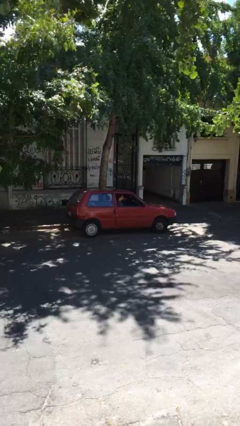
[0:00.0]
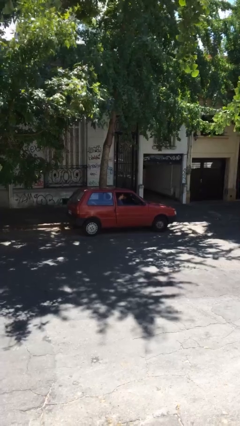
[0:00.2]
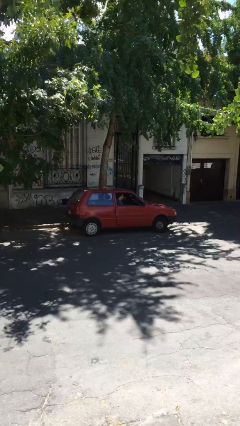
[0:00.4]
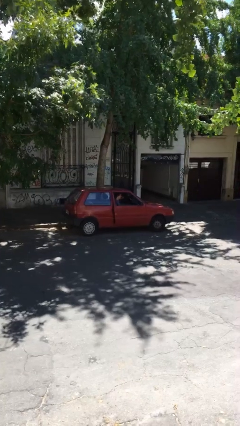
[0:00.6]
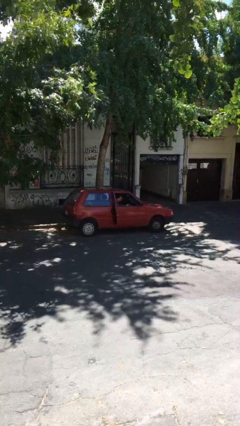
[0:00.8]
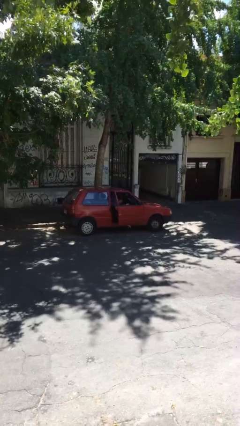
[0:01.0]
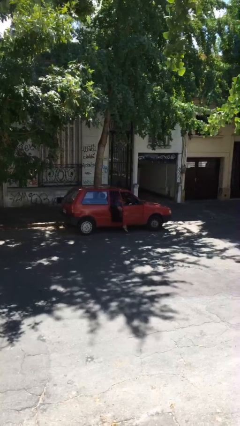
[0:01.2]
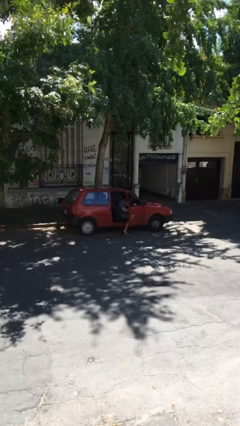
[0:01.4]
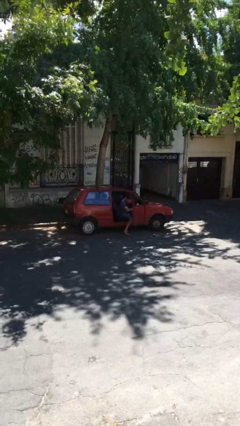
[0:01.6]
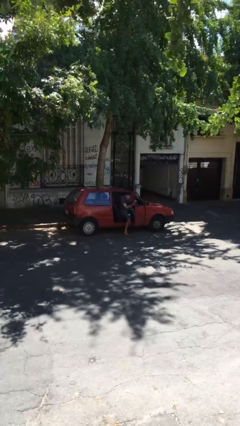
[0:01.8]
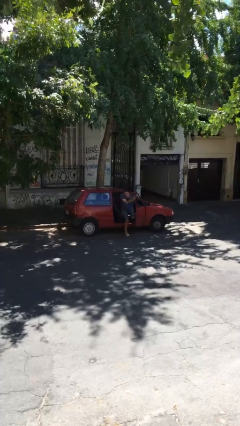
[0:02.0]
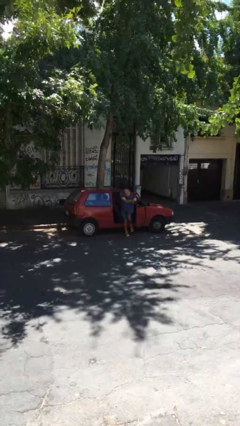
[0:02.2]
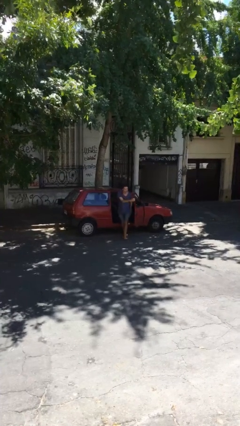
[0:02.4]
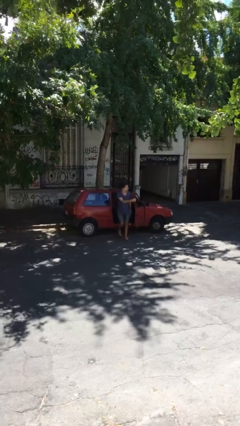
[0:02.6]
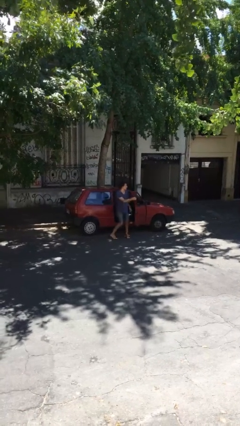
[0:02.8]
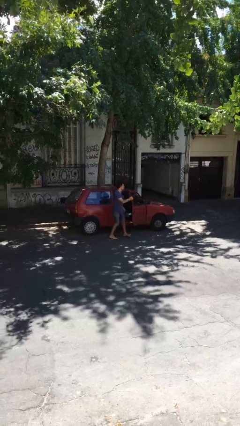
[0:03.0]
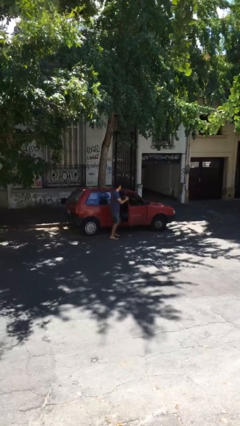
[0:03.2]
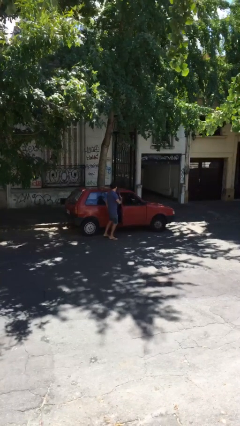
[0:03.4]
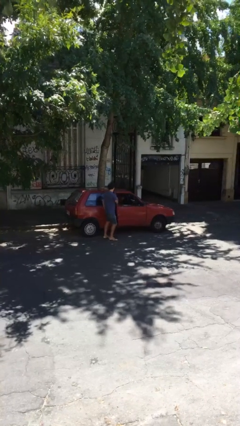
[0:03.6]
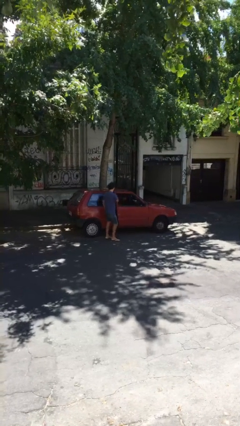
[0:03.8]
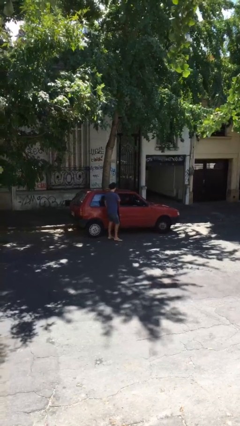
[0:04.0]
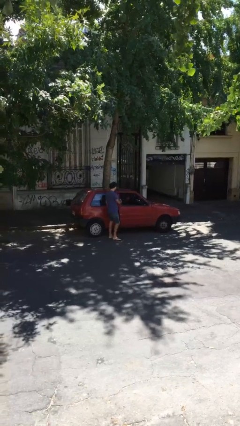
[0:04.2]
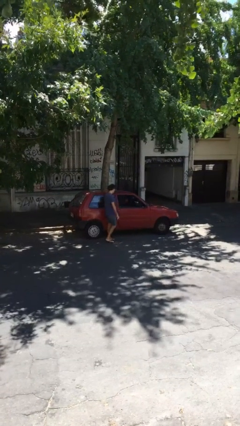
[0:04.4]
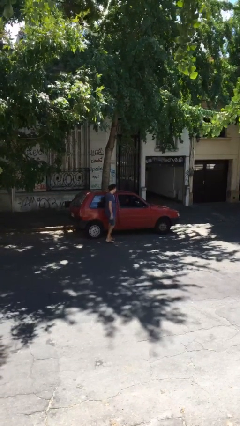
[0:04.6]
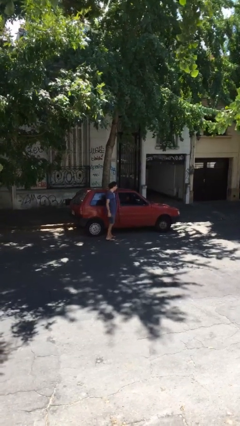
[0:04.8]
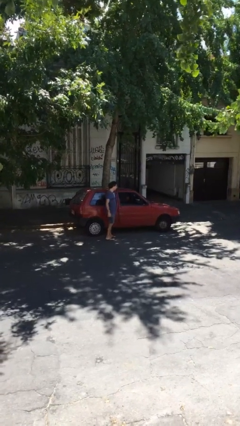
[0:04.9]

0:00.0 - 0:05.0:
car drops off person

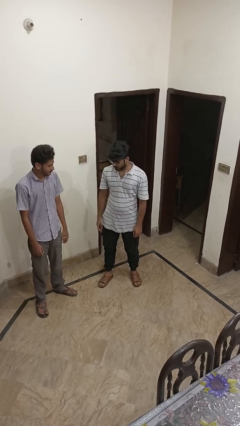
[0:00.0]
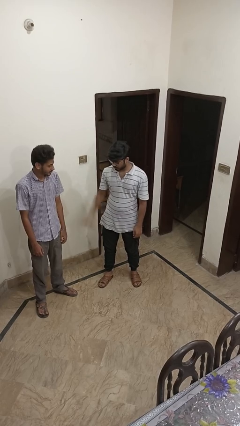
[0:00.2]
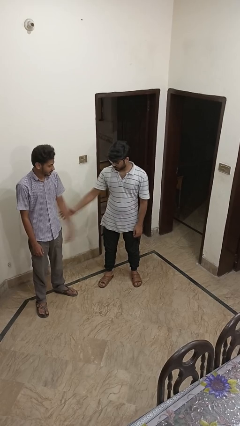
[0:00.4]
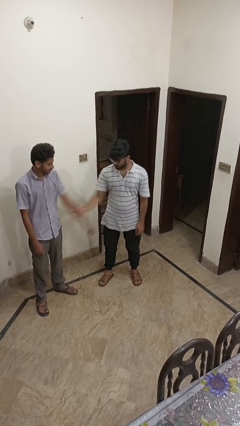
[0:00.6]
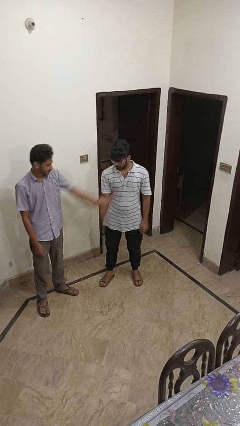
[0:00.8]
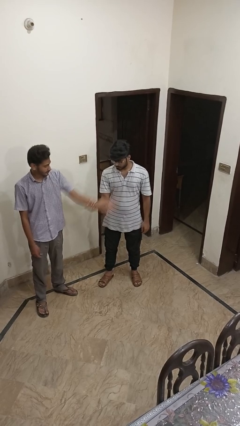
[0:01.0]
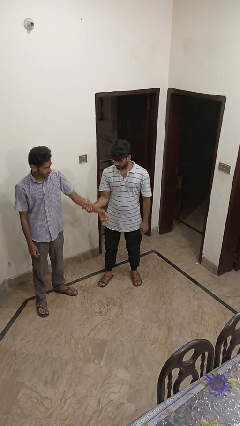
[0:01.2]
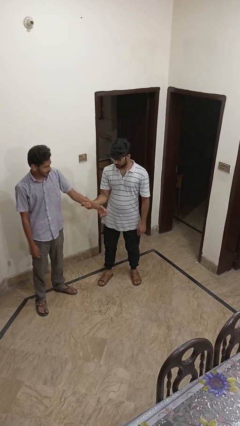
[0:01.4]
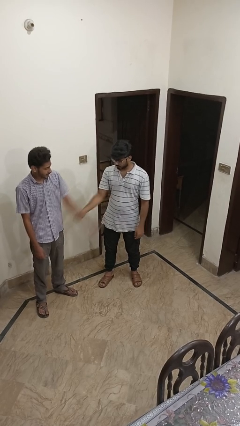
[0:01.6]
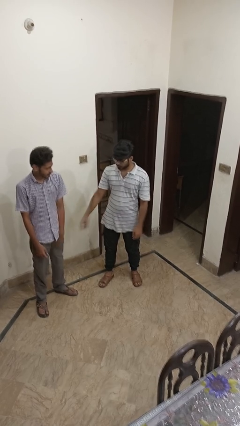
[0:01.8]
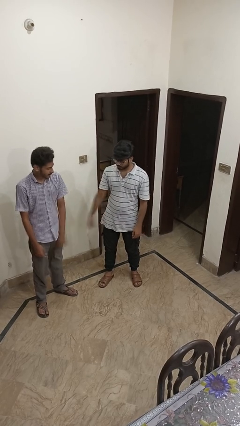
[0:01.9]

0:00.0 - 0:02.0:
person grabs person by forearm

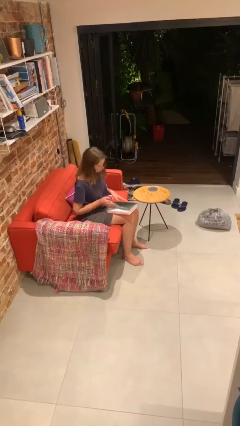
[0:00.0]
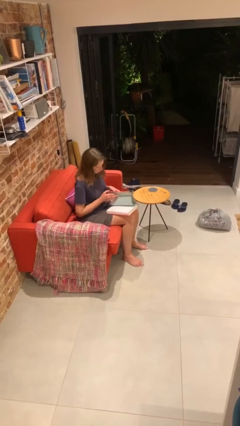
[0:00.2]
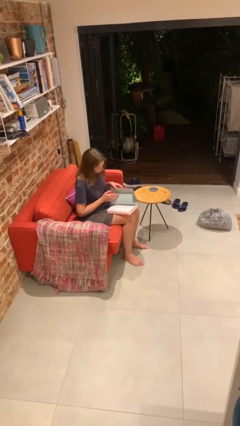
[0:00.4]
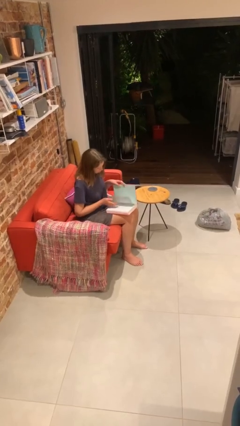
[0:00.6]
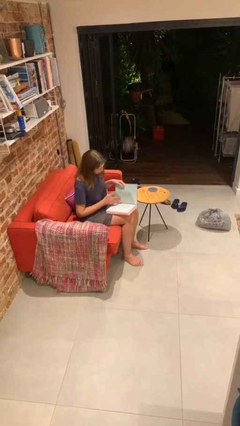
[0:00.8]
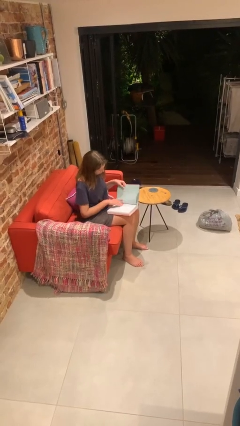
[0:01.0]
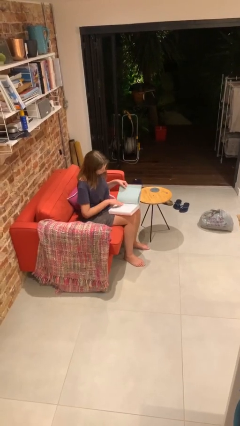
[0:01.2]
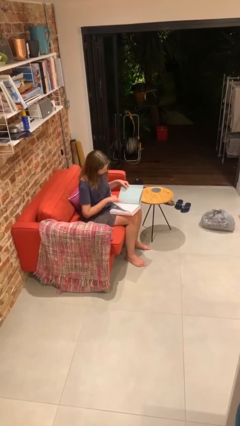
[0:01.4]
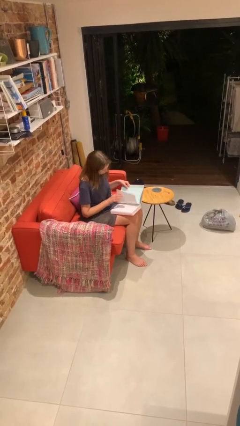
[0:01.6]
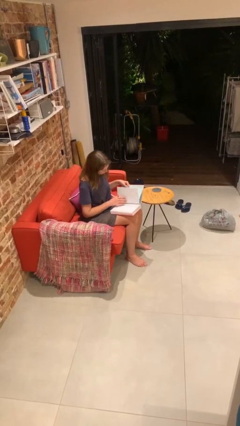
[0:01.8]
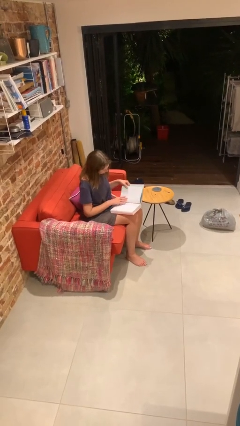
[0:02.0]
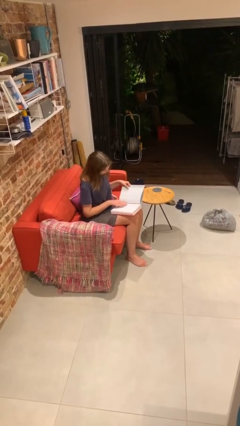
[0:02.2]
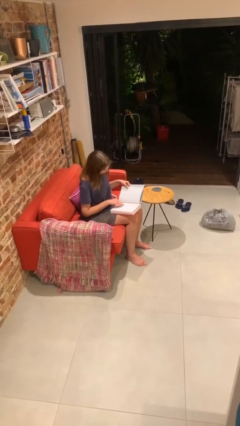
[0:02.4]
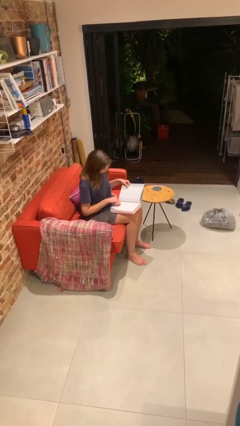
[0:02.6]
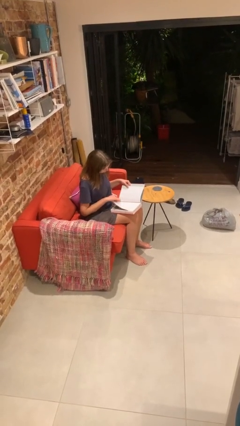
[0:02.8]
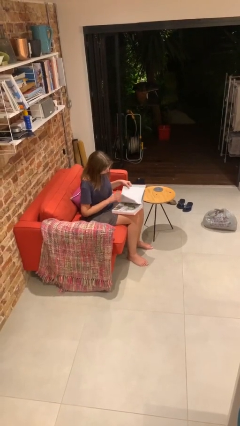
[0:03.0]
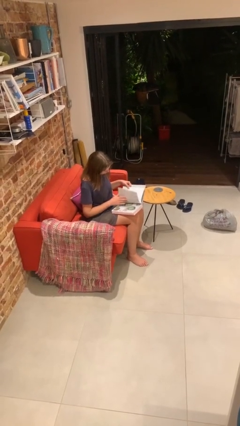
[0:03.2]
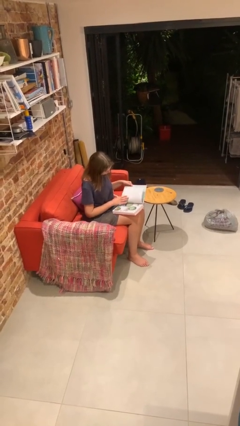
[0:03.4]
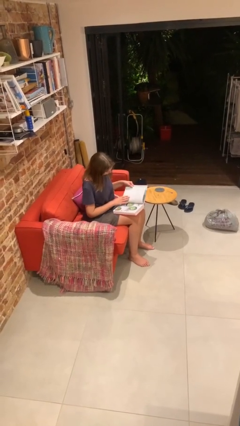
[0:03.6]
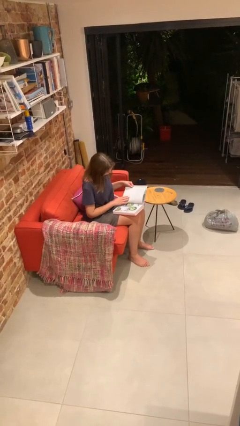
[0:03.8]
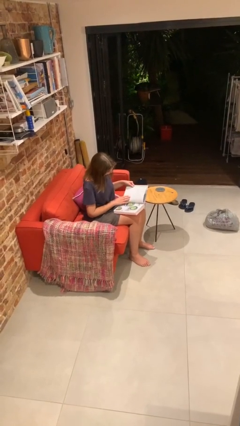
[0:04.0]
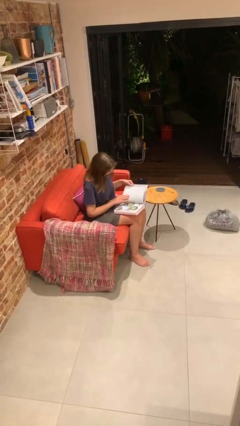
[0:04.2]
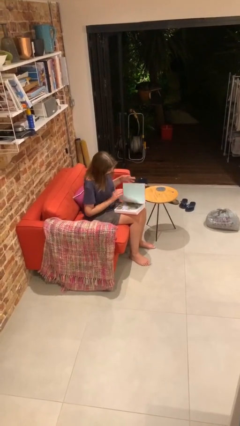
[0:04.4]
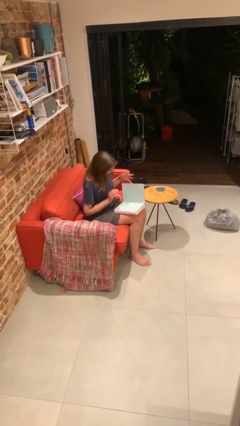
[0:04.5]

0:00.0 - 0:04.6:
person reads document

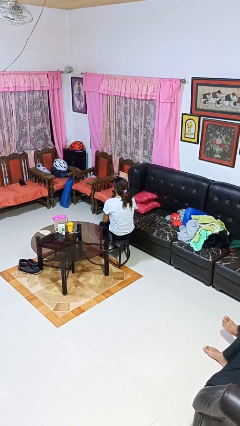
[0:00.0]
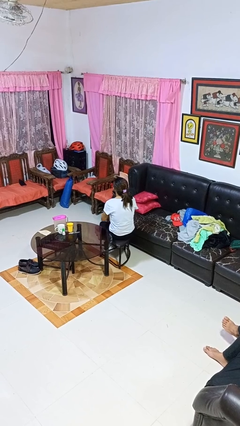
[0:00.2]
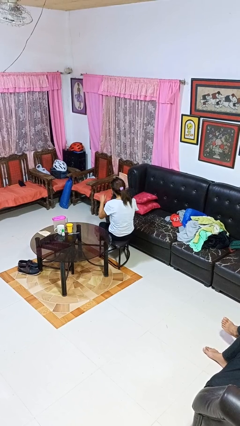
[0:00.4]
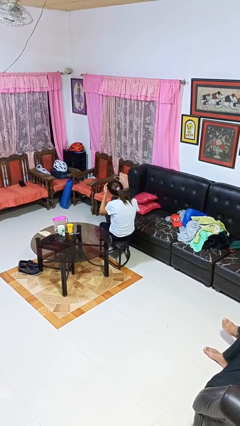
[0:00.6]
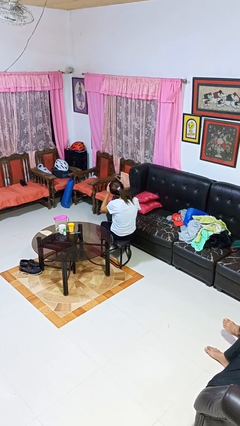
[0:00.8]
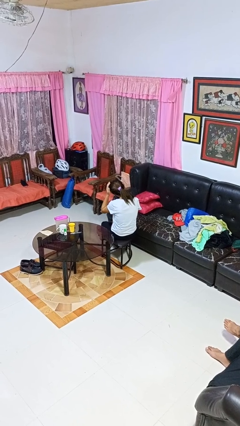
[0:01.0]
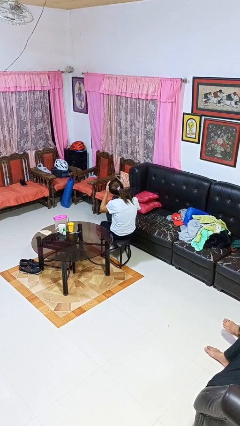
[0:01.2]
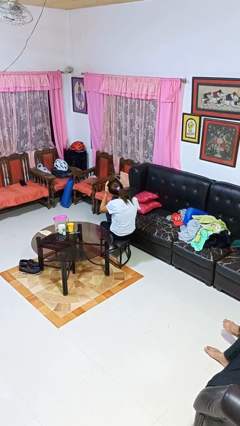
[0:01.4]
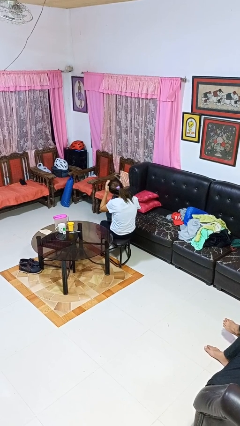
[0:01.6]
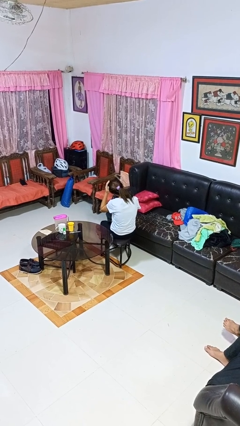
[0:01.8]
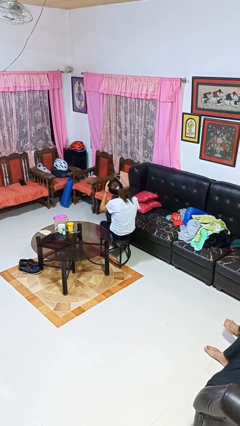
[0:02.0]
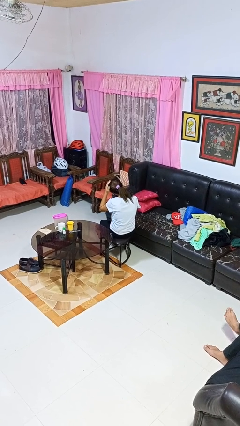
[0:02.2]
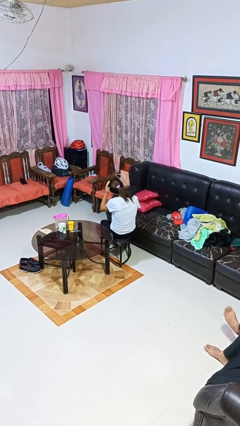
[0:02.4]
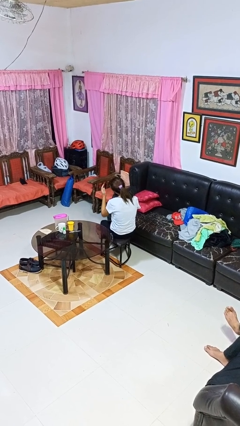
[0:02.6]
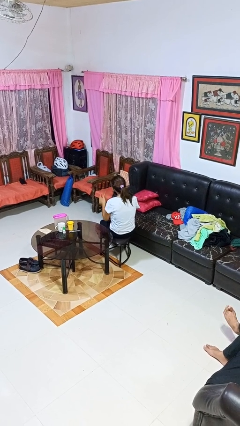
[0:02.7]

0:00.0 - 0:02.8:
person pats head

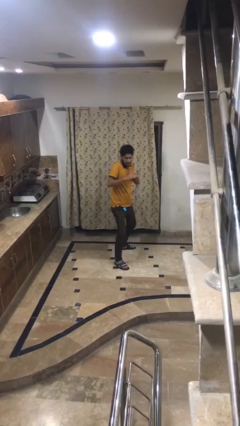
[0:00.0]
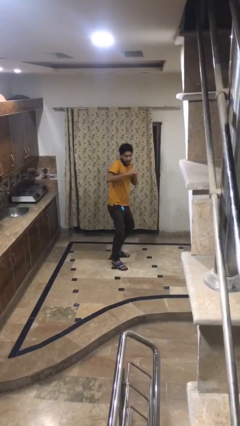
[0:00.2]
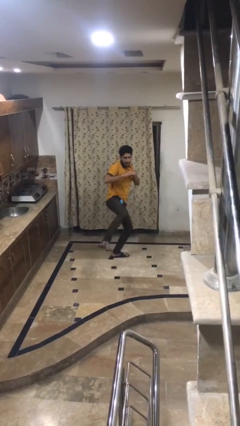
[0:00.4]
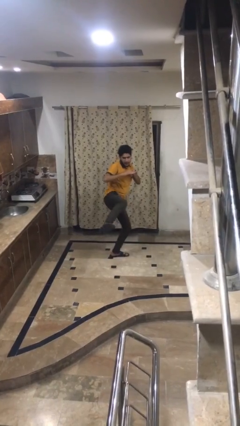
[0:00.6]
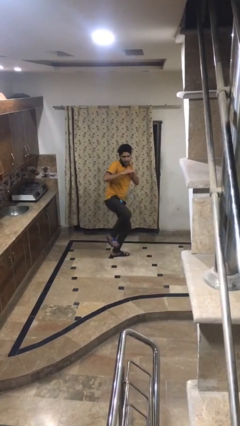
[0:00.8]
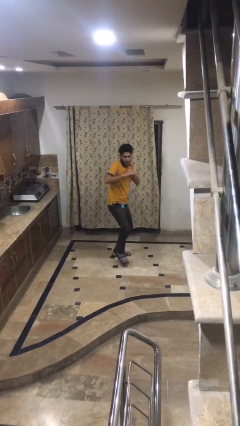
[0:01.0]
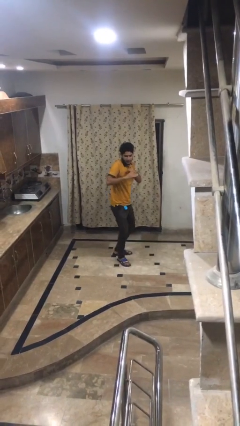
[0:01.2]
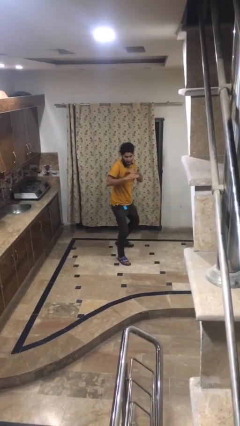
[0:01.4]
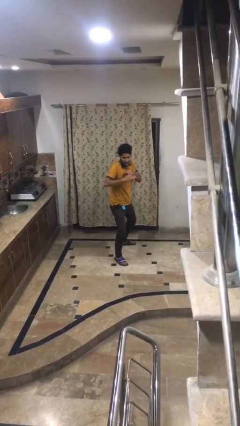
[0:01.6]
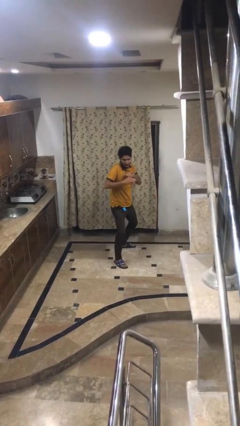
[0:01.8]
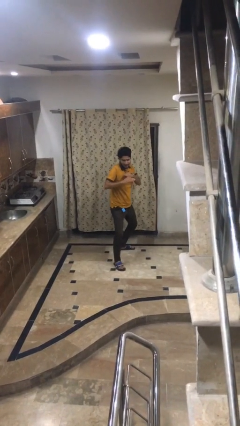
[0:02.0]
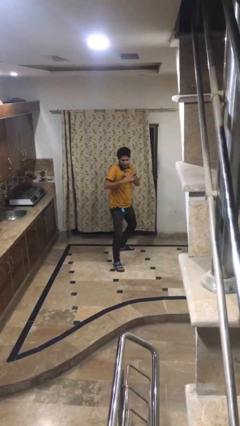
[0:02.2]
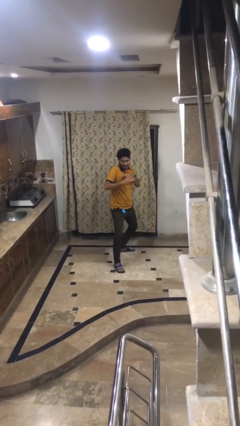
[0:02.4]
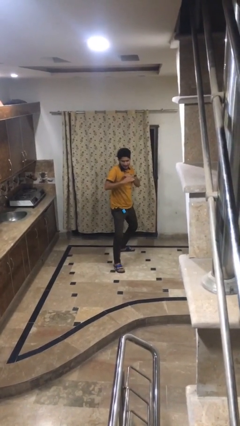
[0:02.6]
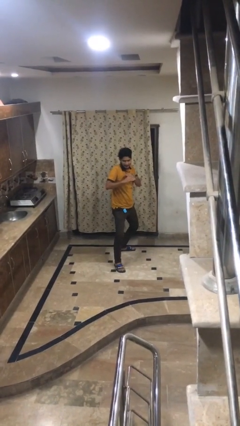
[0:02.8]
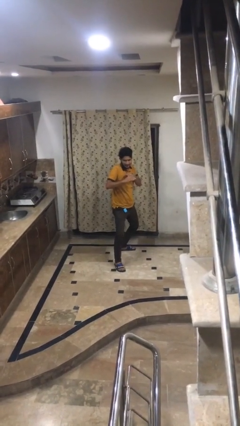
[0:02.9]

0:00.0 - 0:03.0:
person karate kicks
